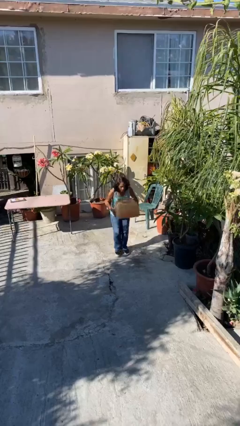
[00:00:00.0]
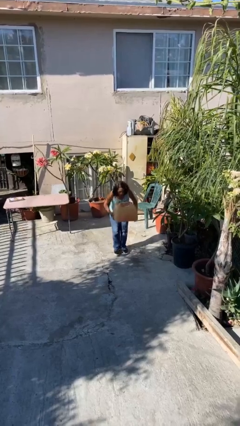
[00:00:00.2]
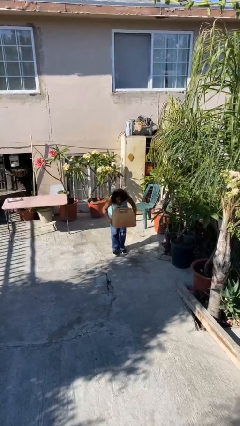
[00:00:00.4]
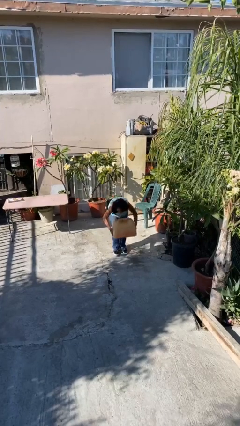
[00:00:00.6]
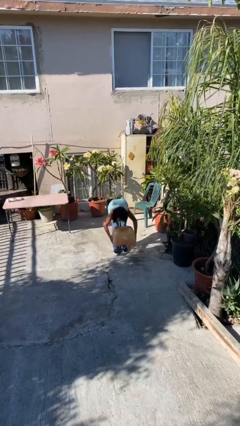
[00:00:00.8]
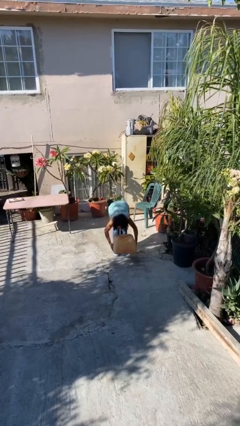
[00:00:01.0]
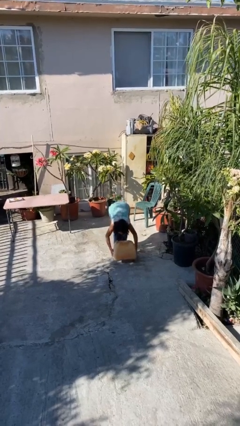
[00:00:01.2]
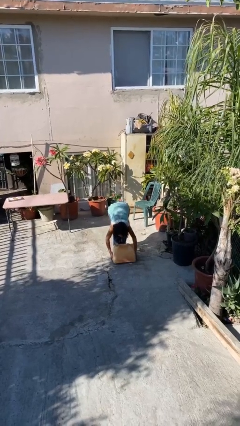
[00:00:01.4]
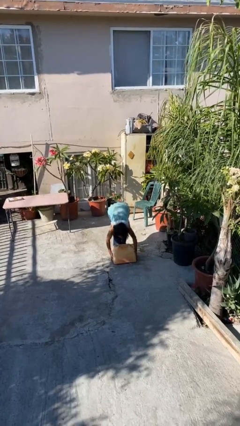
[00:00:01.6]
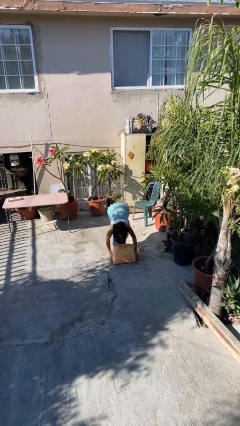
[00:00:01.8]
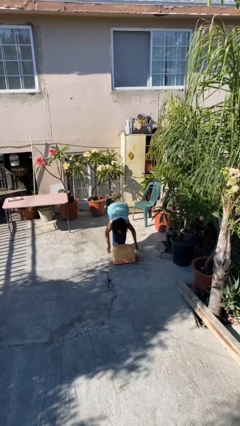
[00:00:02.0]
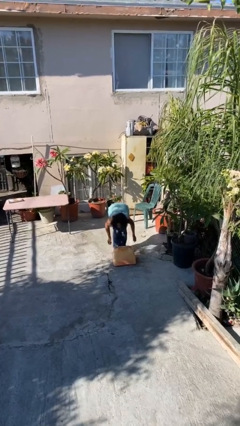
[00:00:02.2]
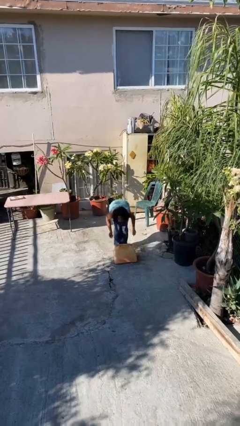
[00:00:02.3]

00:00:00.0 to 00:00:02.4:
person puts down object on floor

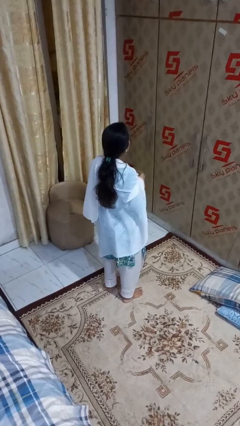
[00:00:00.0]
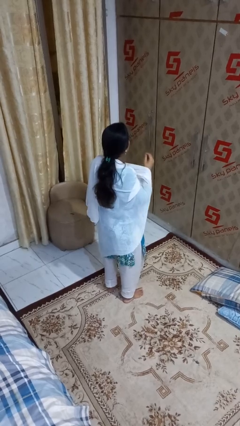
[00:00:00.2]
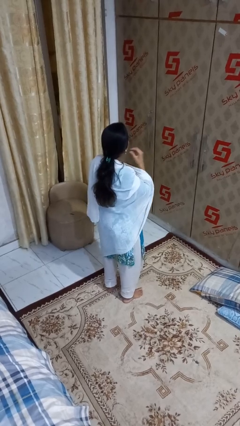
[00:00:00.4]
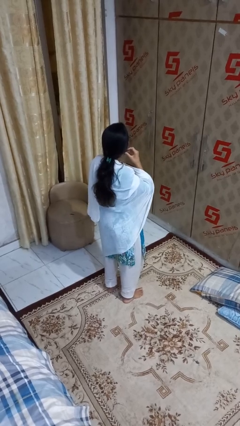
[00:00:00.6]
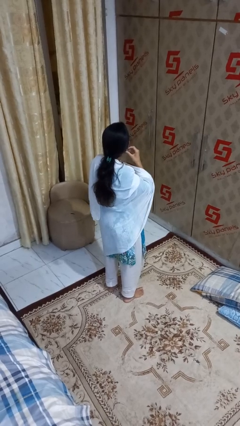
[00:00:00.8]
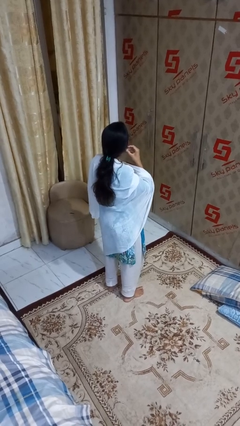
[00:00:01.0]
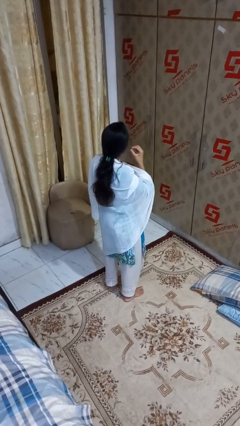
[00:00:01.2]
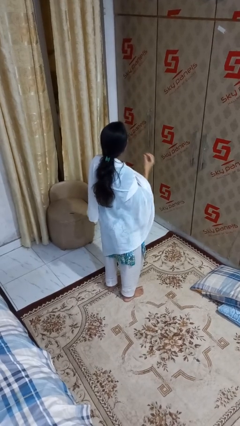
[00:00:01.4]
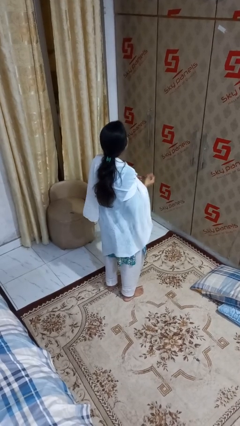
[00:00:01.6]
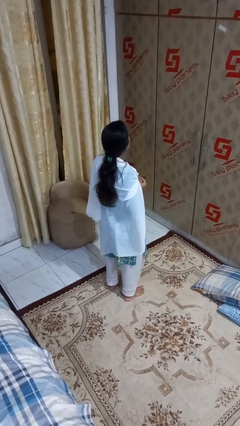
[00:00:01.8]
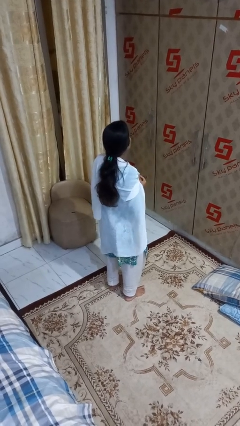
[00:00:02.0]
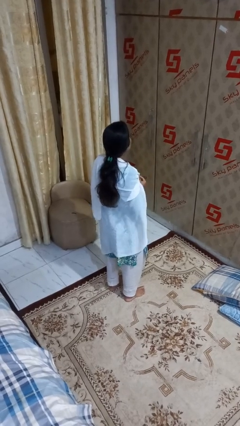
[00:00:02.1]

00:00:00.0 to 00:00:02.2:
person takes off earrings

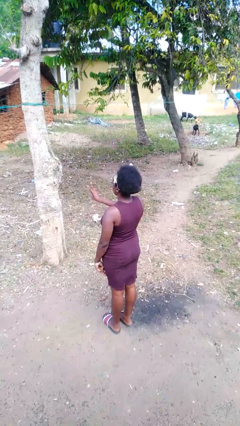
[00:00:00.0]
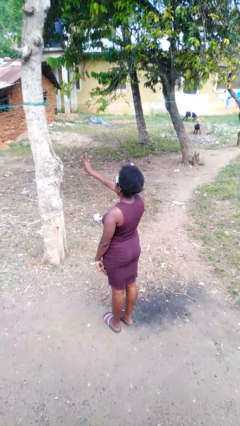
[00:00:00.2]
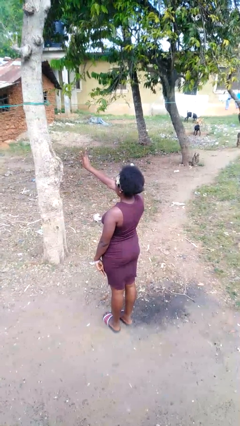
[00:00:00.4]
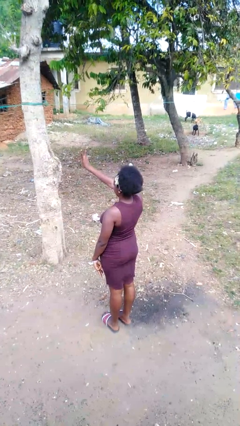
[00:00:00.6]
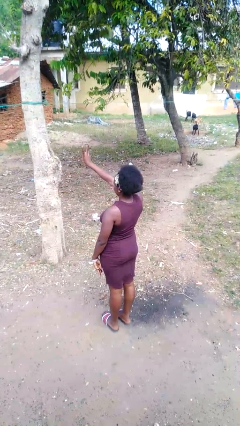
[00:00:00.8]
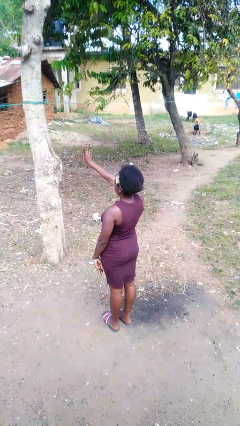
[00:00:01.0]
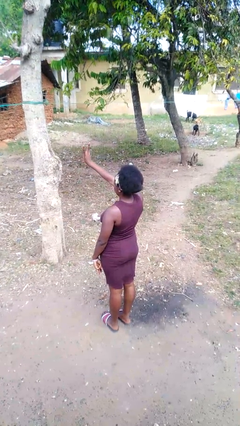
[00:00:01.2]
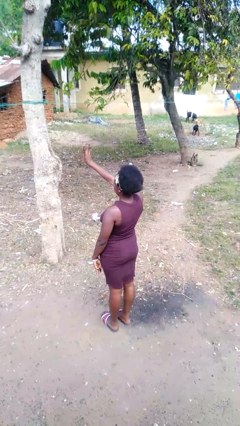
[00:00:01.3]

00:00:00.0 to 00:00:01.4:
person gestures number three

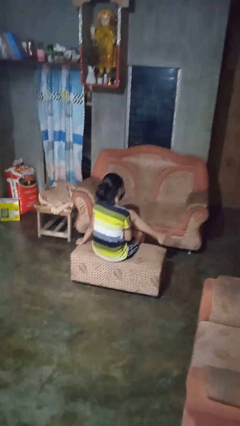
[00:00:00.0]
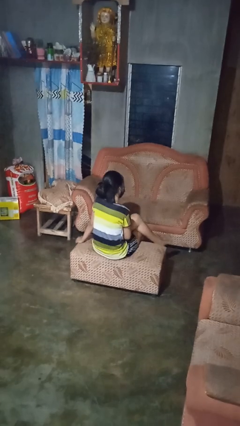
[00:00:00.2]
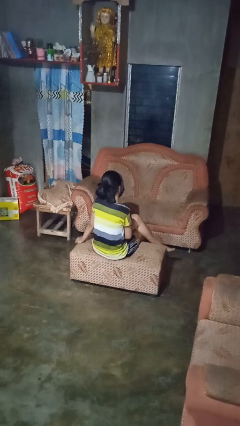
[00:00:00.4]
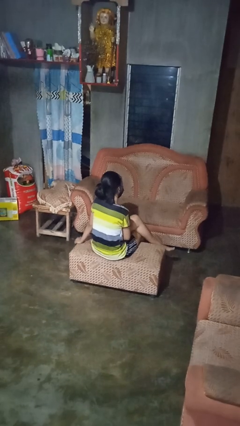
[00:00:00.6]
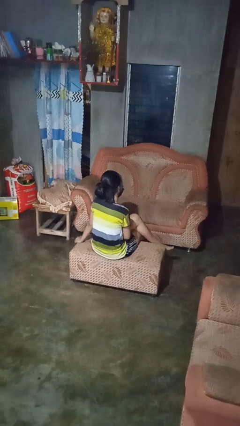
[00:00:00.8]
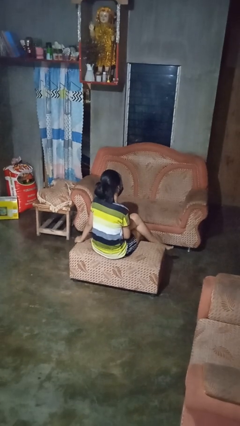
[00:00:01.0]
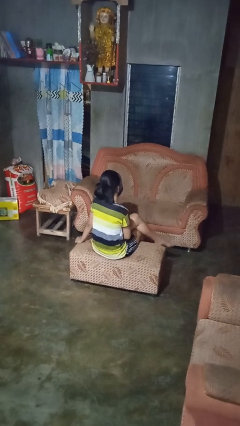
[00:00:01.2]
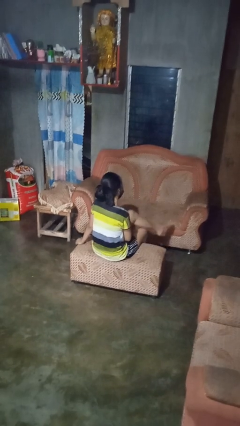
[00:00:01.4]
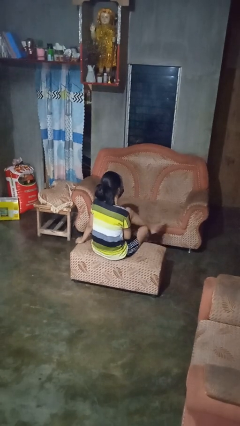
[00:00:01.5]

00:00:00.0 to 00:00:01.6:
person crosses legs

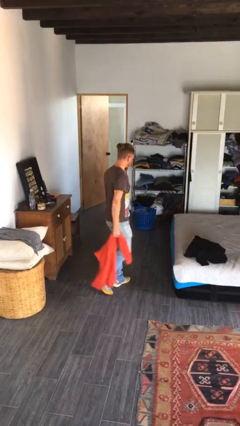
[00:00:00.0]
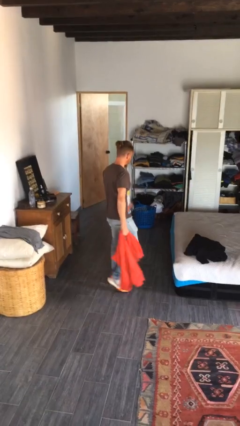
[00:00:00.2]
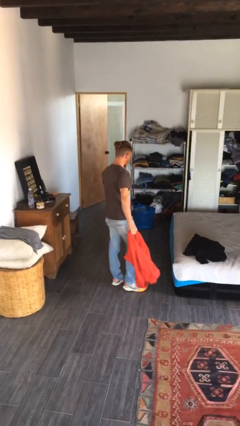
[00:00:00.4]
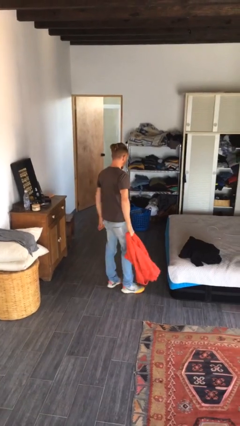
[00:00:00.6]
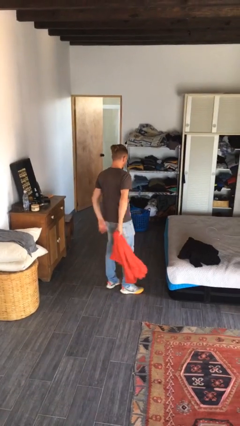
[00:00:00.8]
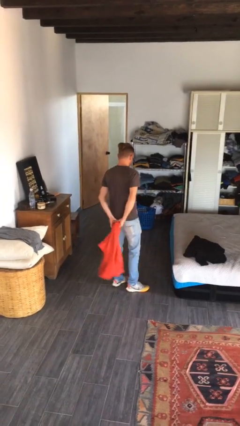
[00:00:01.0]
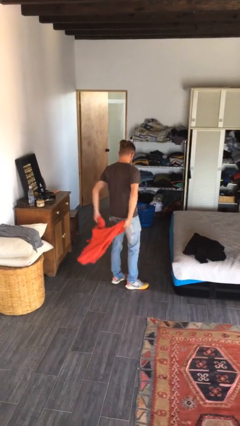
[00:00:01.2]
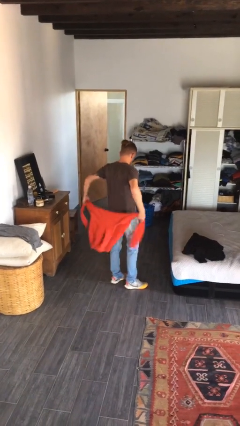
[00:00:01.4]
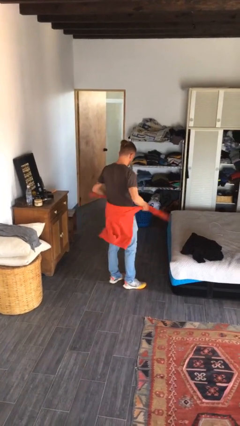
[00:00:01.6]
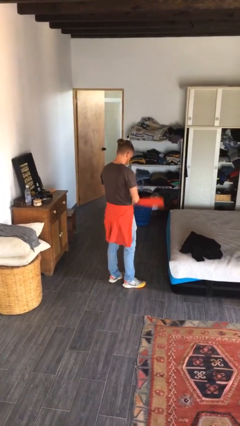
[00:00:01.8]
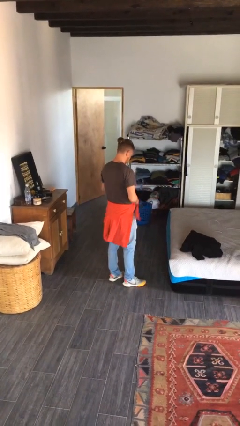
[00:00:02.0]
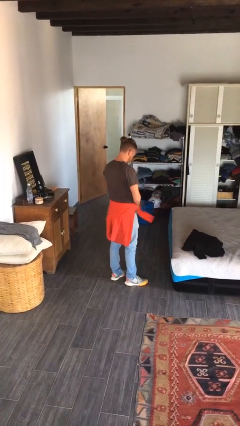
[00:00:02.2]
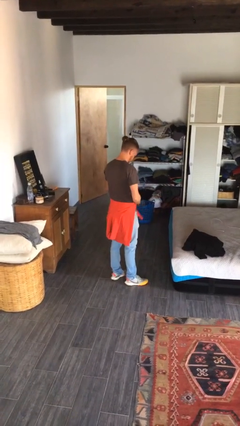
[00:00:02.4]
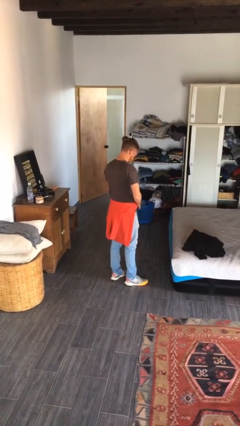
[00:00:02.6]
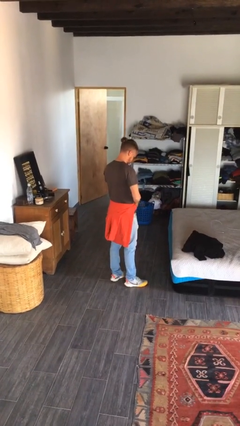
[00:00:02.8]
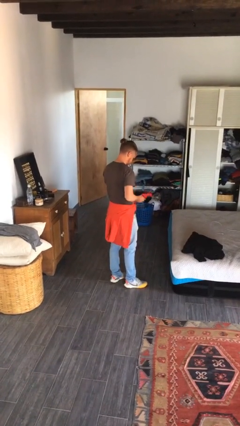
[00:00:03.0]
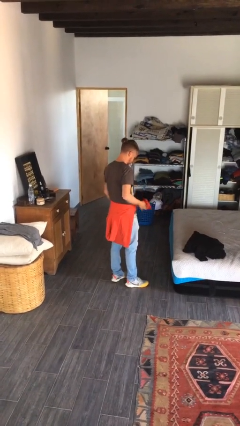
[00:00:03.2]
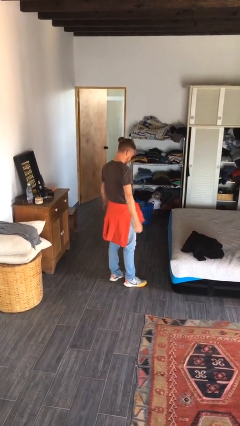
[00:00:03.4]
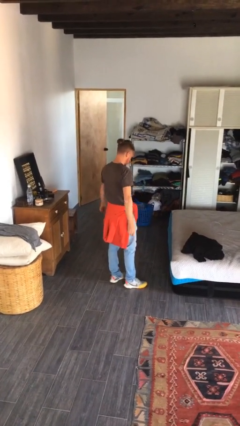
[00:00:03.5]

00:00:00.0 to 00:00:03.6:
person ties jacket around waist

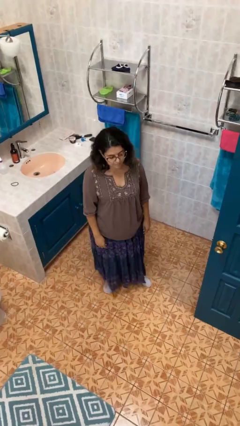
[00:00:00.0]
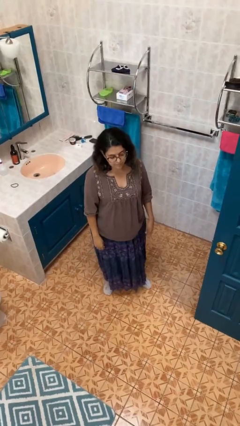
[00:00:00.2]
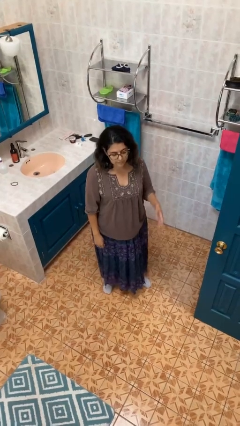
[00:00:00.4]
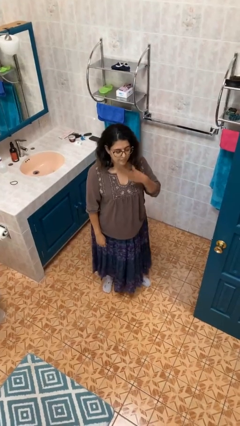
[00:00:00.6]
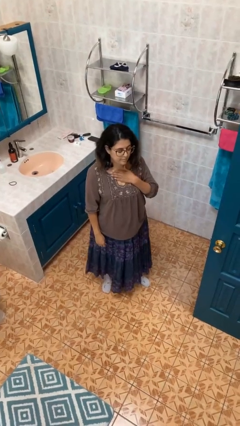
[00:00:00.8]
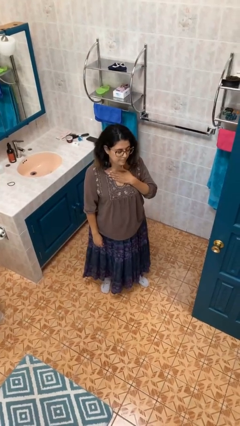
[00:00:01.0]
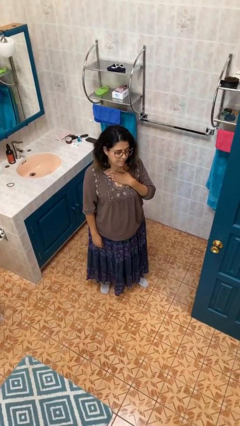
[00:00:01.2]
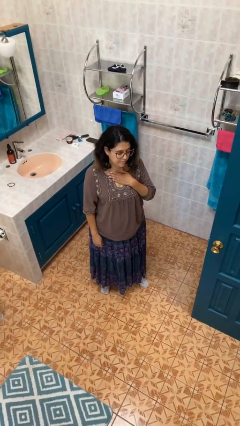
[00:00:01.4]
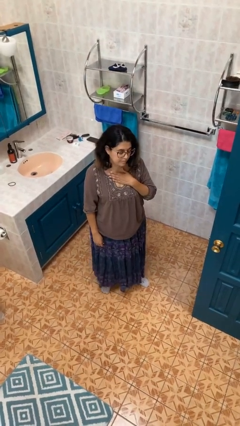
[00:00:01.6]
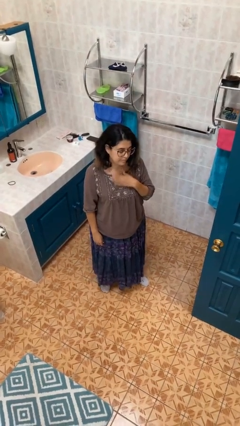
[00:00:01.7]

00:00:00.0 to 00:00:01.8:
person drums on chest

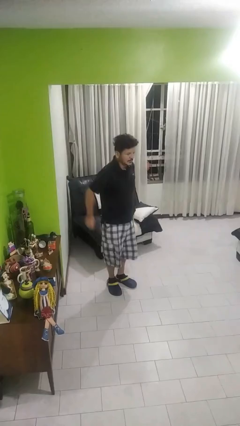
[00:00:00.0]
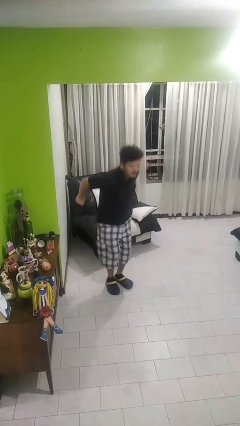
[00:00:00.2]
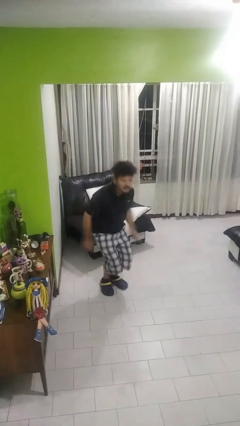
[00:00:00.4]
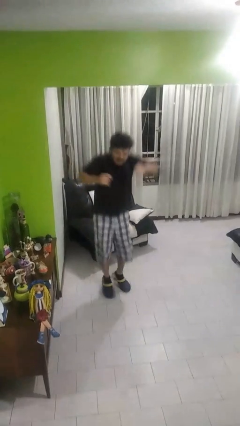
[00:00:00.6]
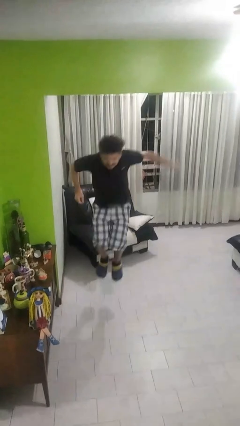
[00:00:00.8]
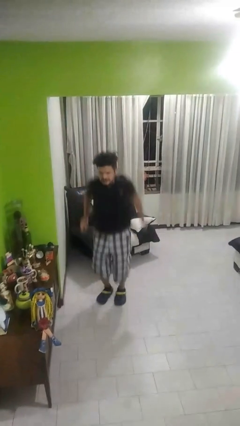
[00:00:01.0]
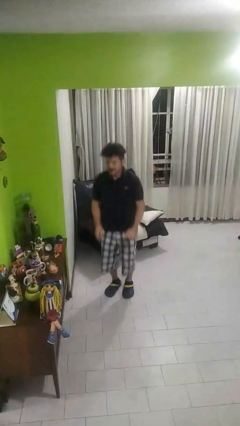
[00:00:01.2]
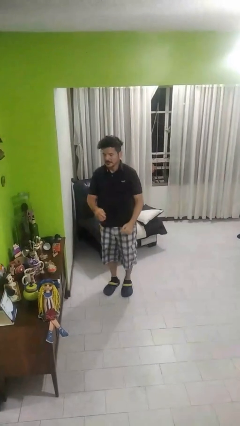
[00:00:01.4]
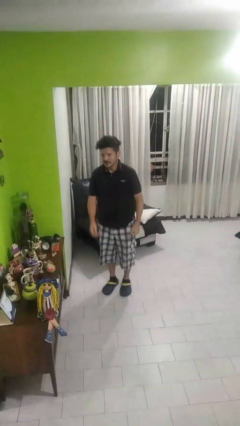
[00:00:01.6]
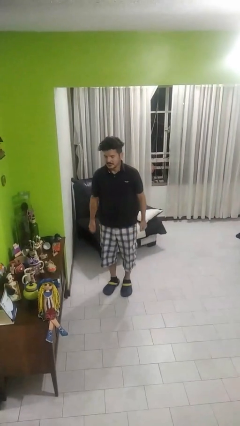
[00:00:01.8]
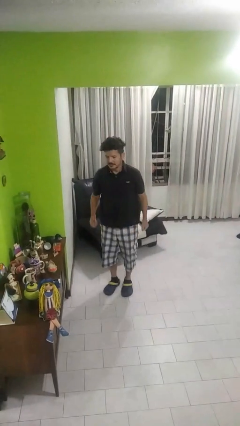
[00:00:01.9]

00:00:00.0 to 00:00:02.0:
person jumps

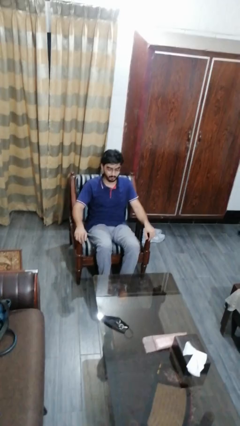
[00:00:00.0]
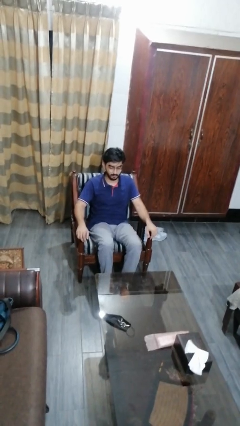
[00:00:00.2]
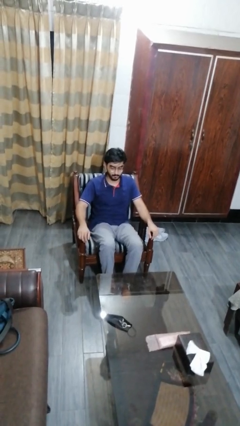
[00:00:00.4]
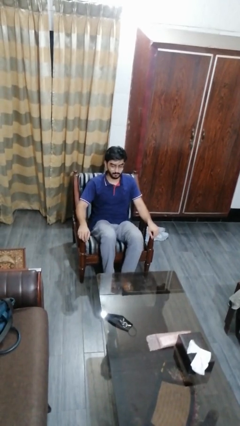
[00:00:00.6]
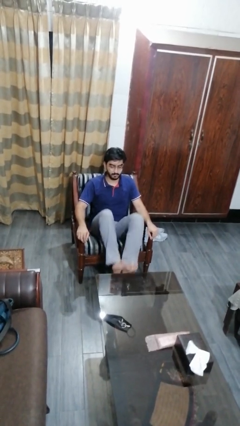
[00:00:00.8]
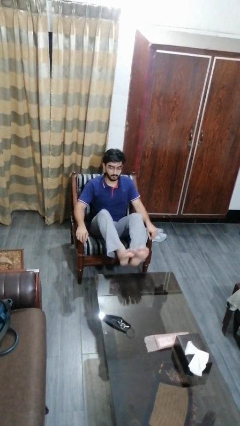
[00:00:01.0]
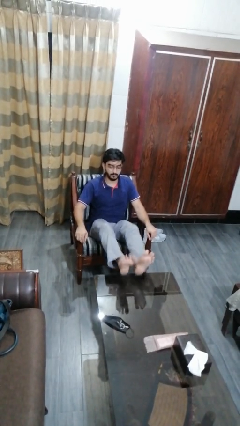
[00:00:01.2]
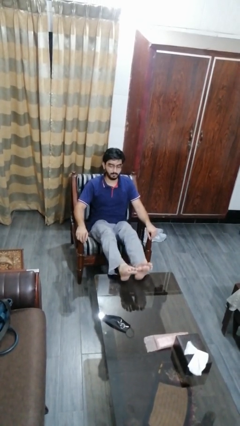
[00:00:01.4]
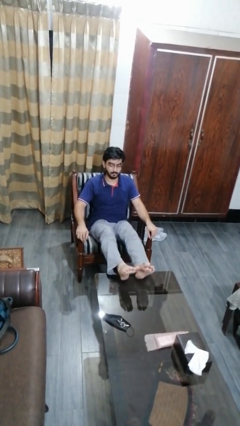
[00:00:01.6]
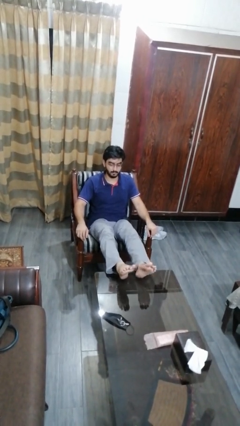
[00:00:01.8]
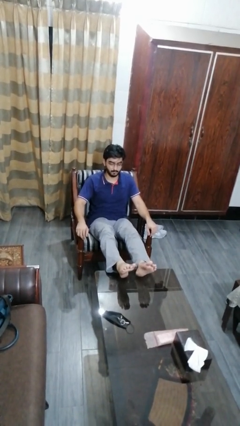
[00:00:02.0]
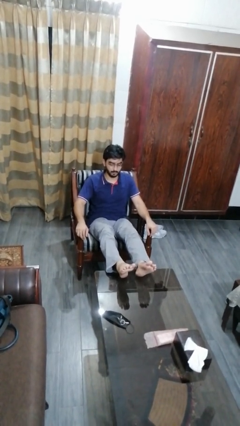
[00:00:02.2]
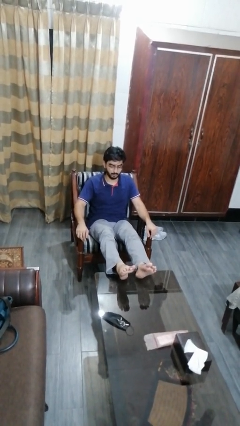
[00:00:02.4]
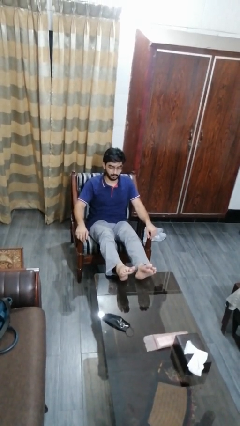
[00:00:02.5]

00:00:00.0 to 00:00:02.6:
person puts feet up
